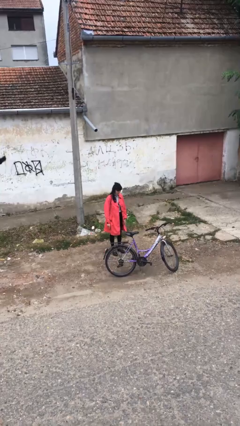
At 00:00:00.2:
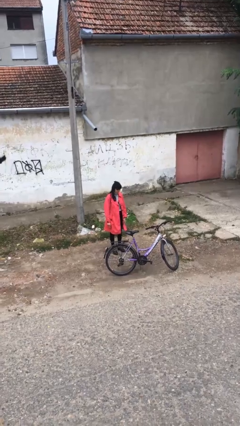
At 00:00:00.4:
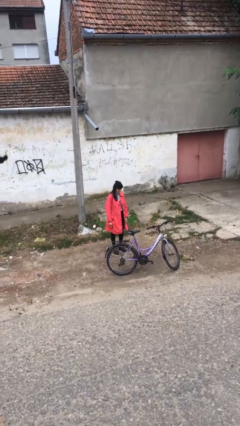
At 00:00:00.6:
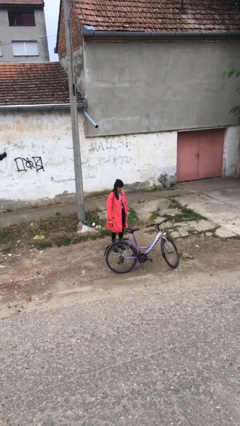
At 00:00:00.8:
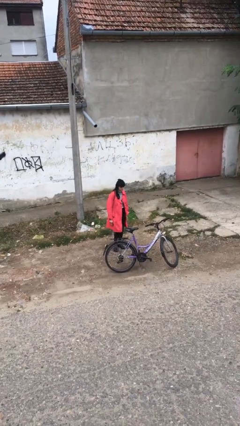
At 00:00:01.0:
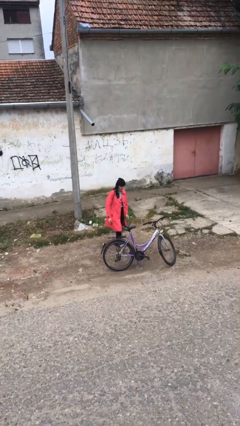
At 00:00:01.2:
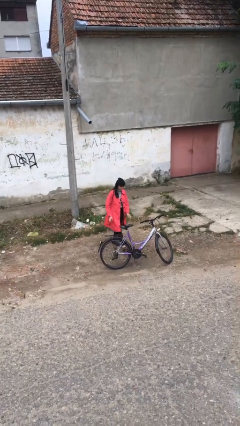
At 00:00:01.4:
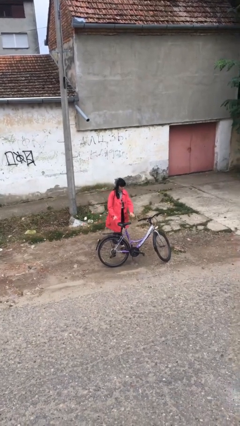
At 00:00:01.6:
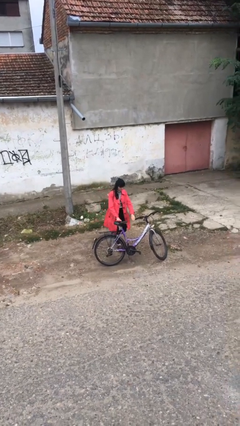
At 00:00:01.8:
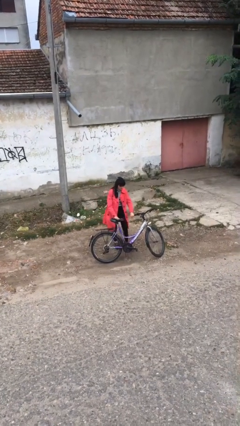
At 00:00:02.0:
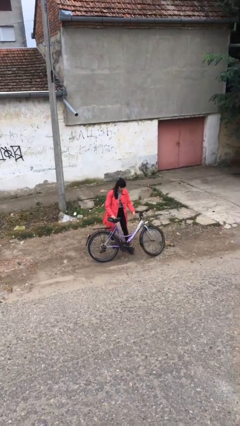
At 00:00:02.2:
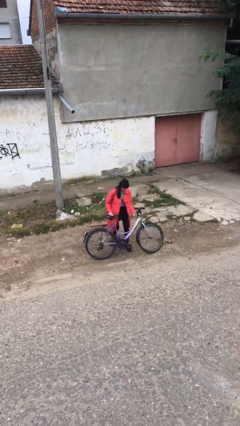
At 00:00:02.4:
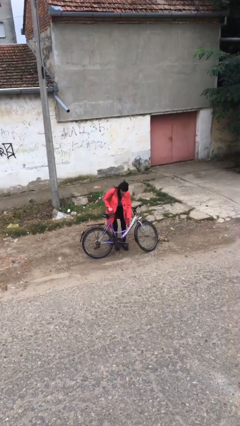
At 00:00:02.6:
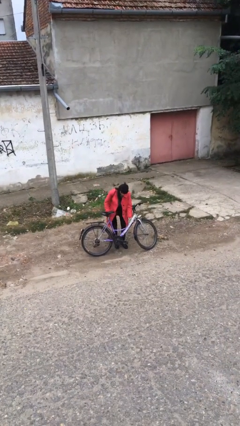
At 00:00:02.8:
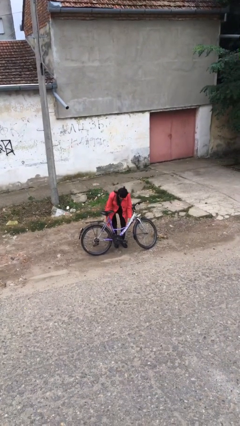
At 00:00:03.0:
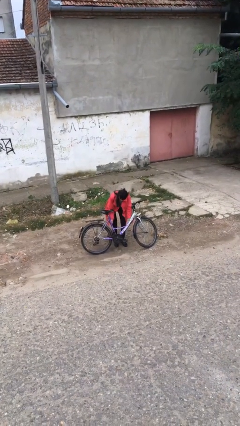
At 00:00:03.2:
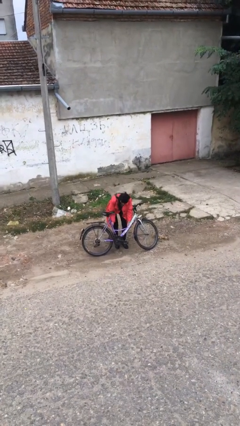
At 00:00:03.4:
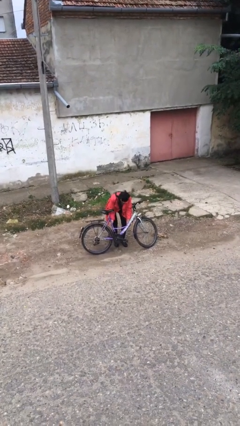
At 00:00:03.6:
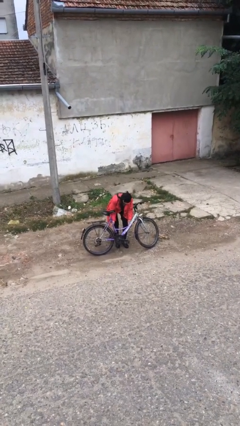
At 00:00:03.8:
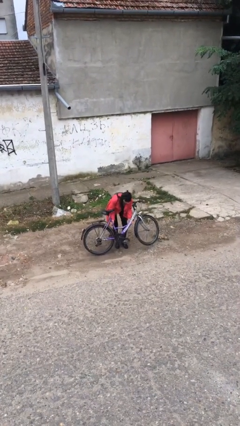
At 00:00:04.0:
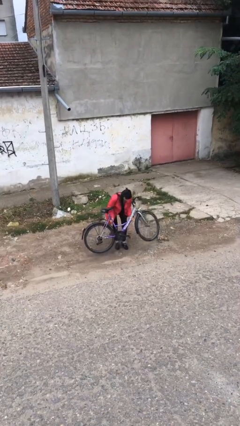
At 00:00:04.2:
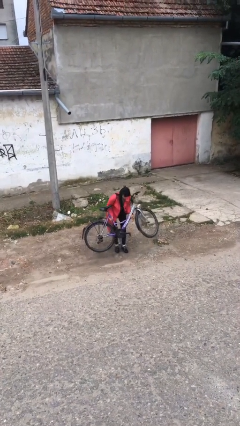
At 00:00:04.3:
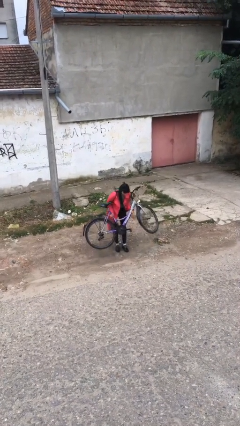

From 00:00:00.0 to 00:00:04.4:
person picks up object from floor

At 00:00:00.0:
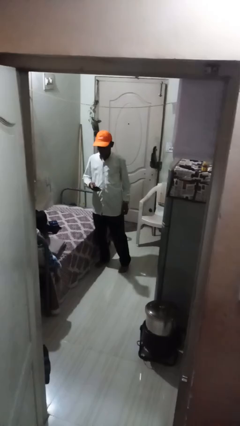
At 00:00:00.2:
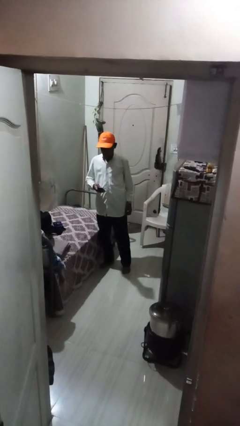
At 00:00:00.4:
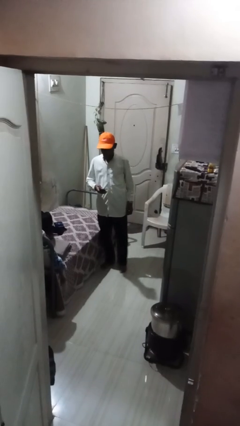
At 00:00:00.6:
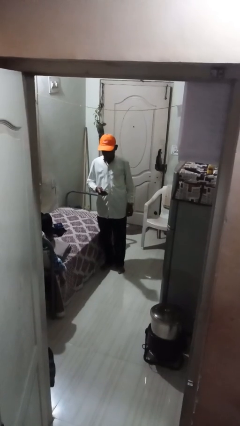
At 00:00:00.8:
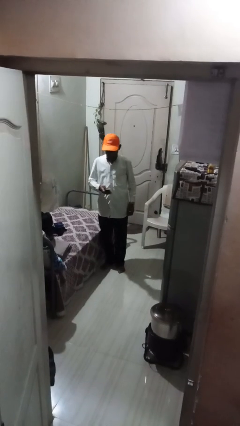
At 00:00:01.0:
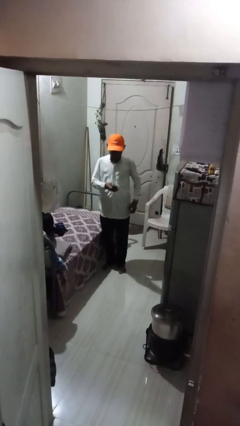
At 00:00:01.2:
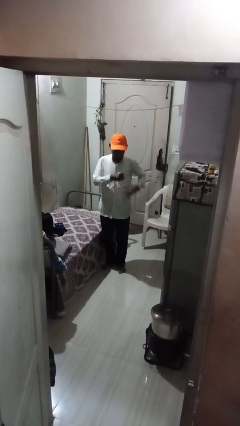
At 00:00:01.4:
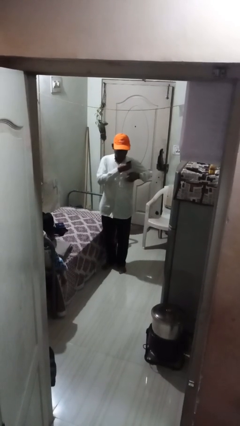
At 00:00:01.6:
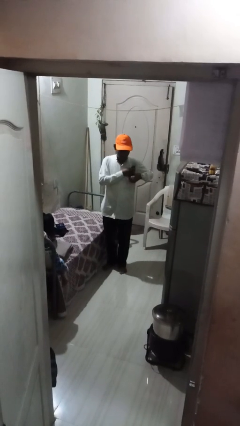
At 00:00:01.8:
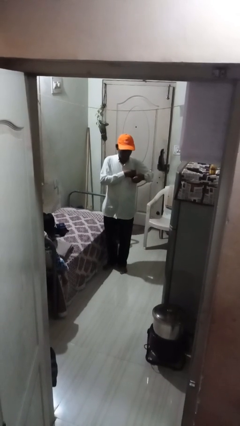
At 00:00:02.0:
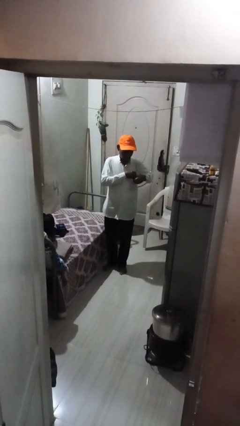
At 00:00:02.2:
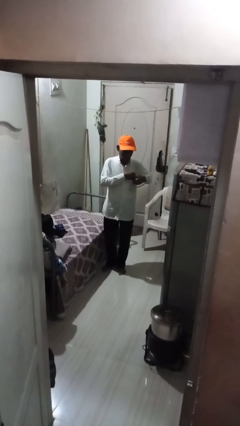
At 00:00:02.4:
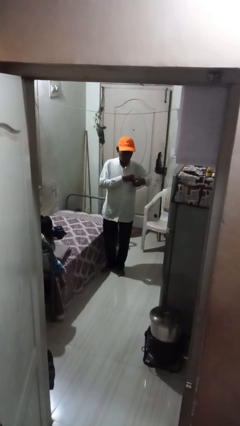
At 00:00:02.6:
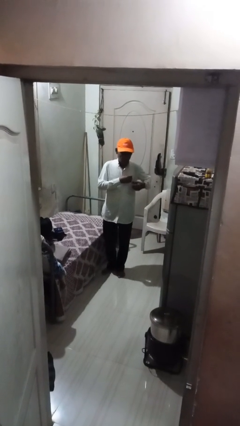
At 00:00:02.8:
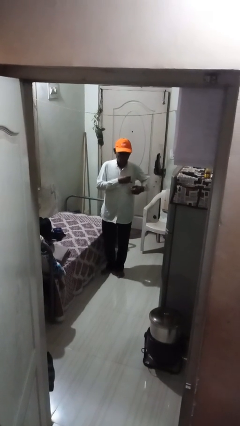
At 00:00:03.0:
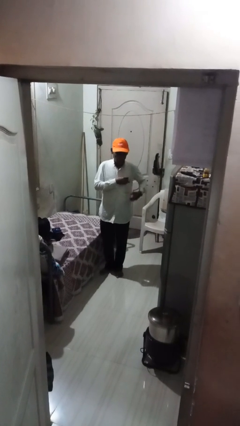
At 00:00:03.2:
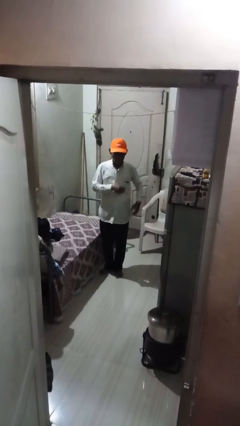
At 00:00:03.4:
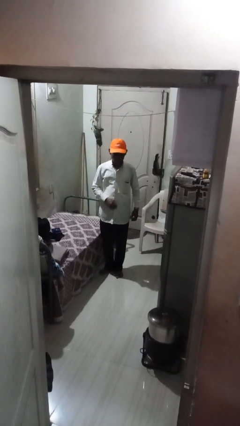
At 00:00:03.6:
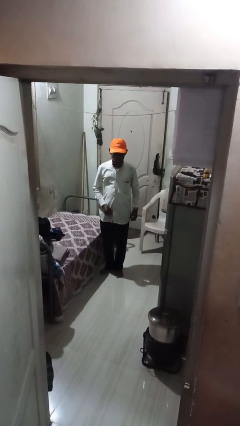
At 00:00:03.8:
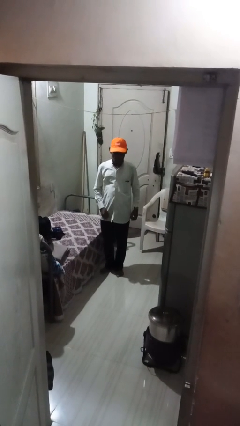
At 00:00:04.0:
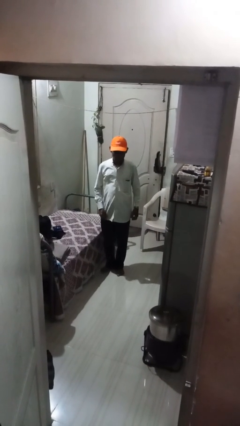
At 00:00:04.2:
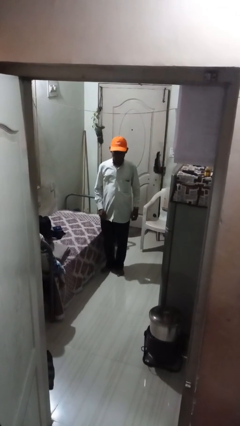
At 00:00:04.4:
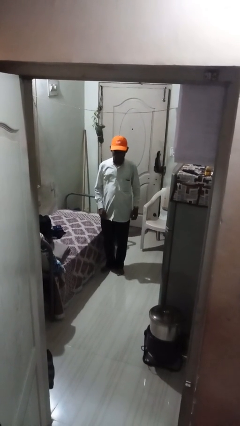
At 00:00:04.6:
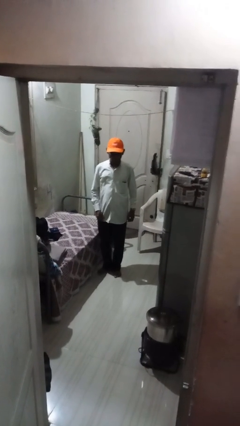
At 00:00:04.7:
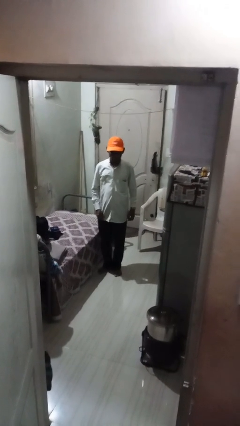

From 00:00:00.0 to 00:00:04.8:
person puts phone into pocket

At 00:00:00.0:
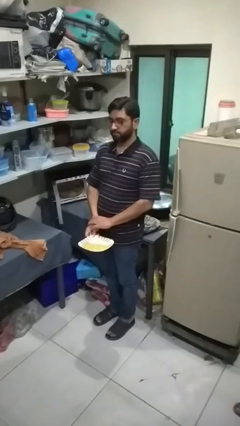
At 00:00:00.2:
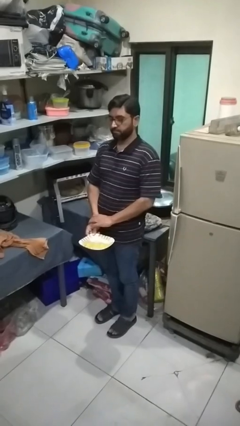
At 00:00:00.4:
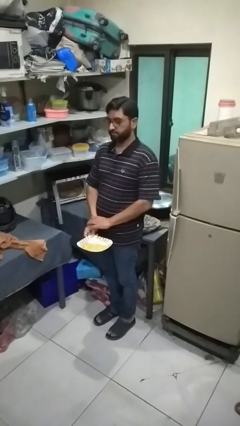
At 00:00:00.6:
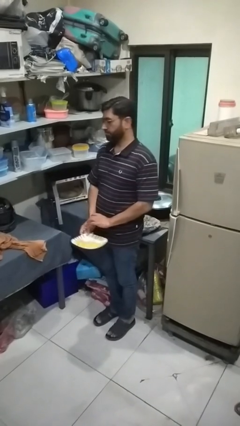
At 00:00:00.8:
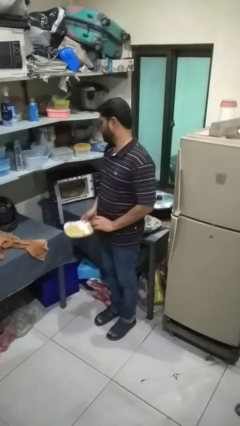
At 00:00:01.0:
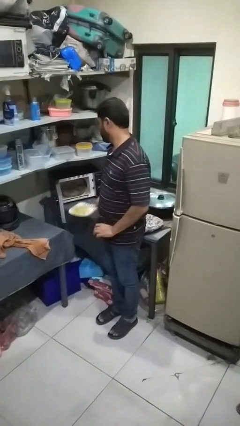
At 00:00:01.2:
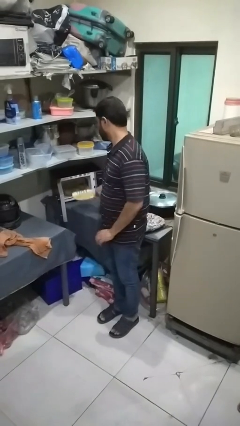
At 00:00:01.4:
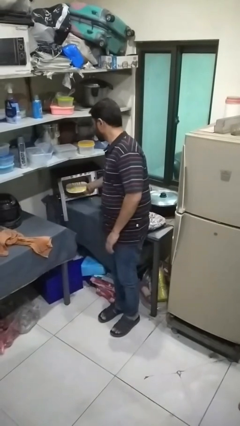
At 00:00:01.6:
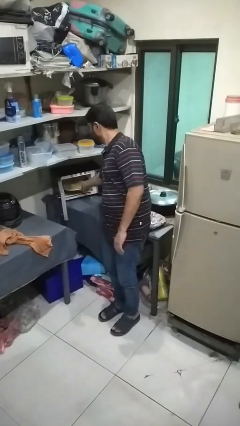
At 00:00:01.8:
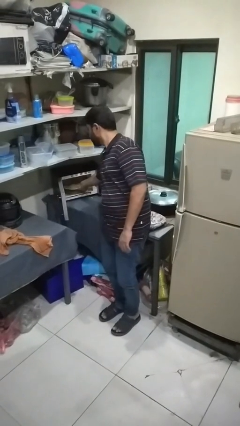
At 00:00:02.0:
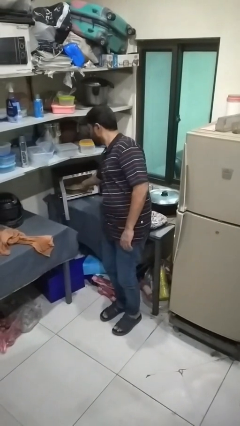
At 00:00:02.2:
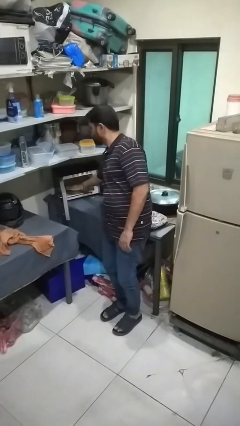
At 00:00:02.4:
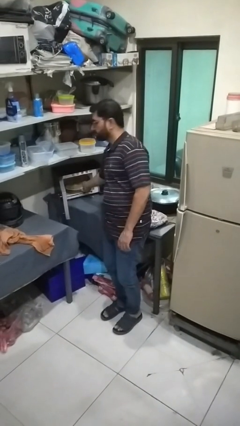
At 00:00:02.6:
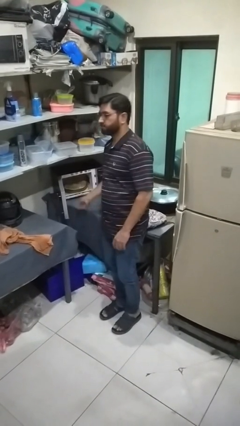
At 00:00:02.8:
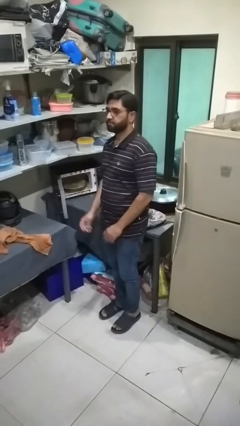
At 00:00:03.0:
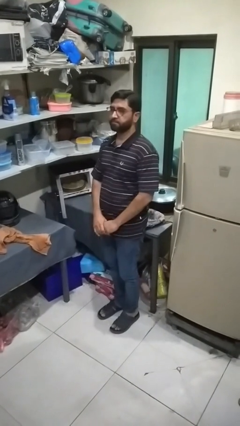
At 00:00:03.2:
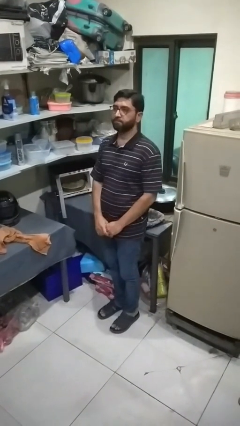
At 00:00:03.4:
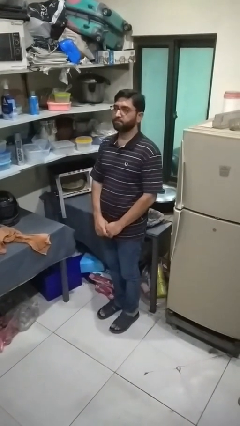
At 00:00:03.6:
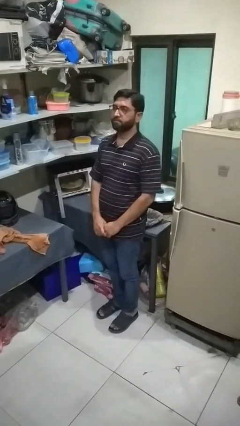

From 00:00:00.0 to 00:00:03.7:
person puts object into microwave

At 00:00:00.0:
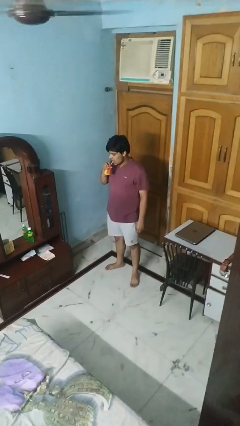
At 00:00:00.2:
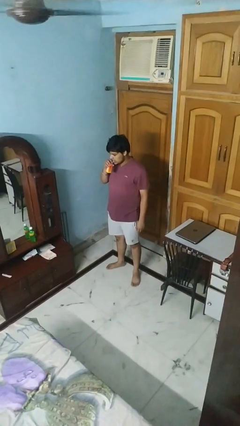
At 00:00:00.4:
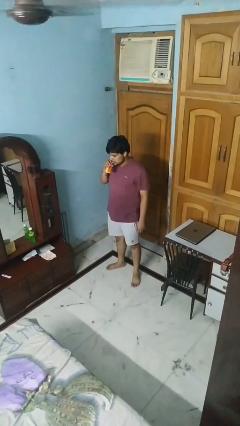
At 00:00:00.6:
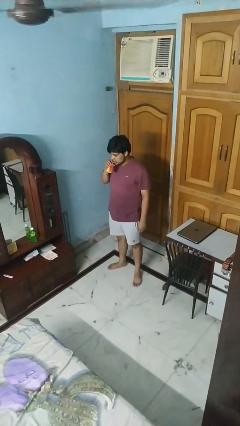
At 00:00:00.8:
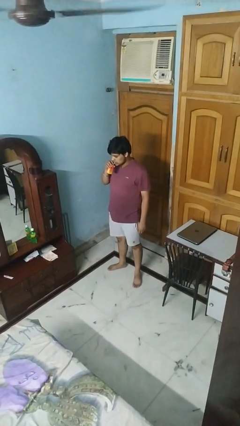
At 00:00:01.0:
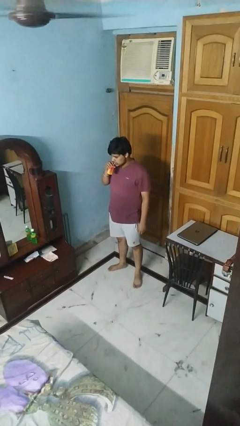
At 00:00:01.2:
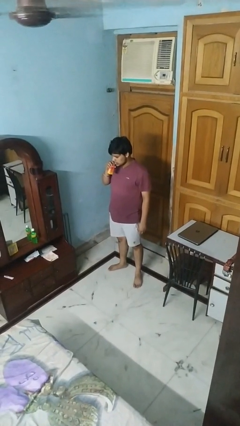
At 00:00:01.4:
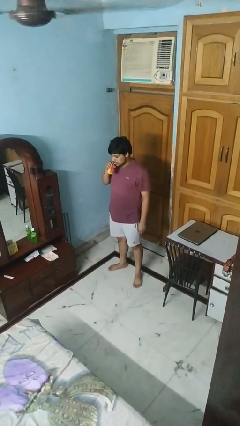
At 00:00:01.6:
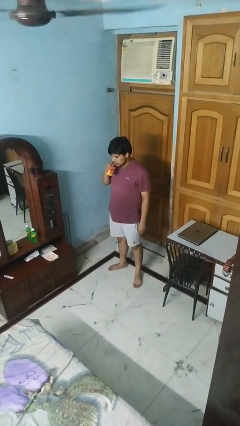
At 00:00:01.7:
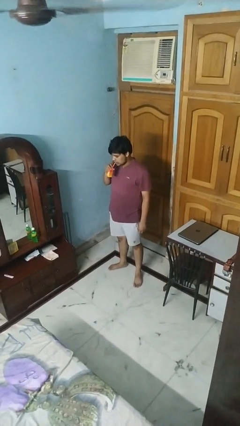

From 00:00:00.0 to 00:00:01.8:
person drinks from straw

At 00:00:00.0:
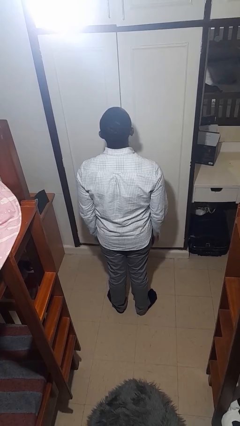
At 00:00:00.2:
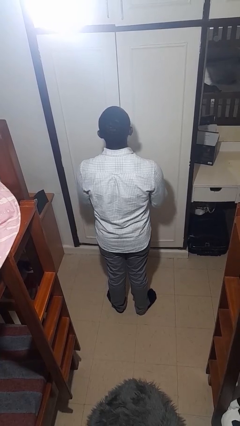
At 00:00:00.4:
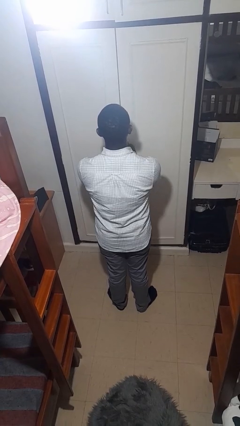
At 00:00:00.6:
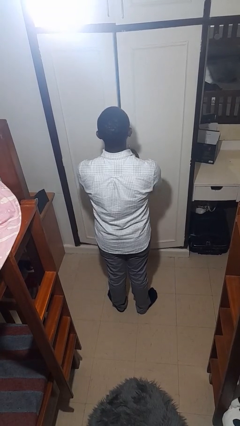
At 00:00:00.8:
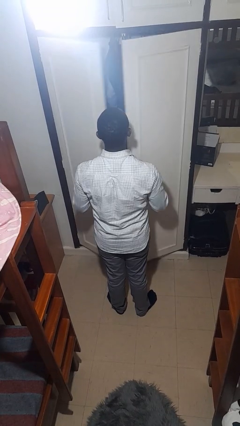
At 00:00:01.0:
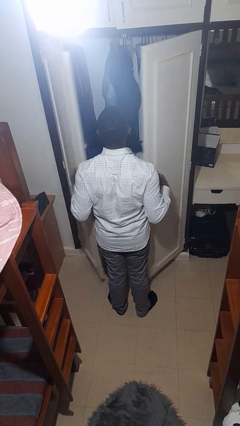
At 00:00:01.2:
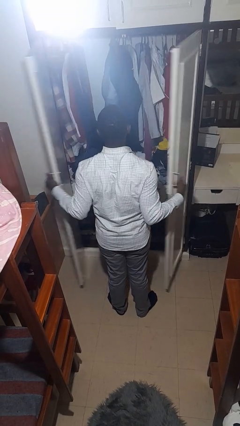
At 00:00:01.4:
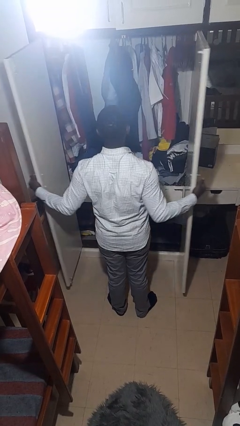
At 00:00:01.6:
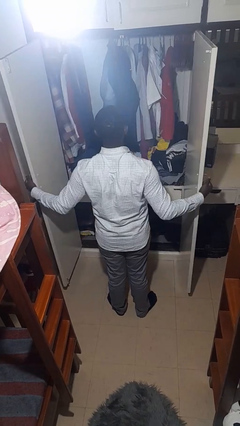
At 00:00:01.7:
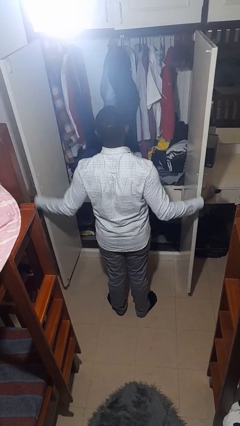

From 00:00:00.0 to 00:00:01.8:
person opens closet door

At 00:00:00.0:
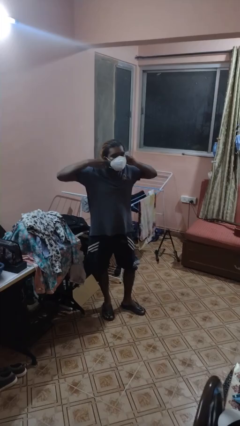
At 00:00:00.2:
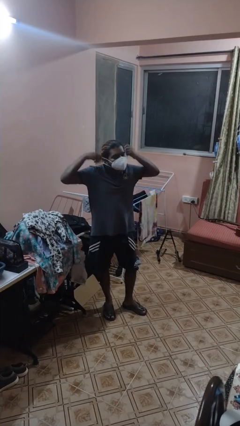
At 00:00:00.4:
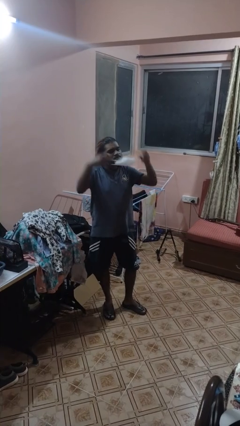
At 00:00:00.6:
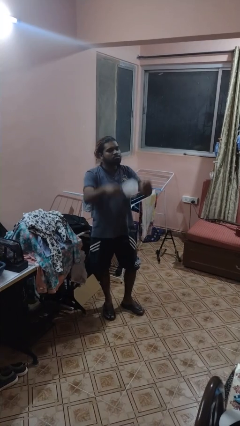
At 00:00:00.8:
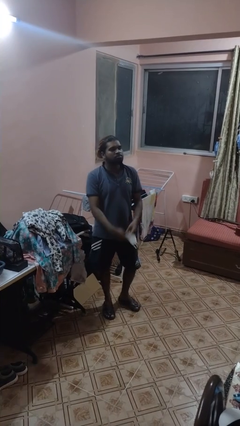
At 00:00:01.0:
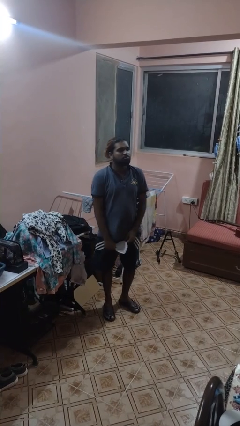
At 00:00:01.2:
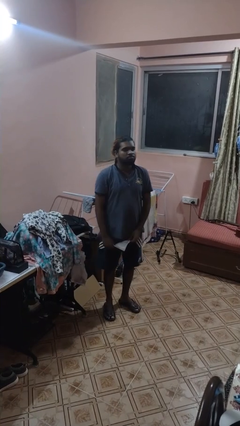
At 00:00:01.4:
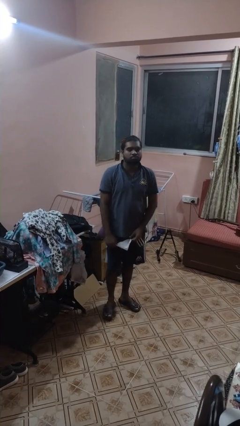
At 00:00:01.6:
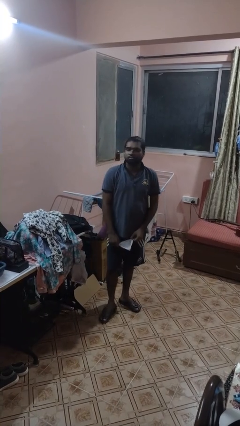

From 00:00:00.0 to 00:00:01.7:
person takes off facemask
